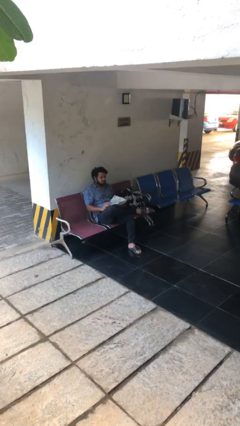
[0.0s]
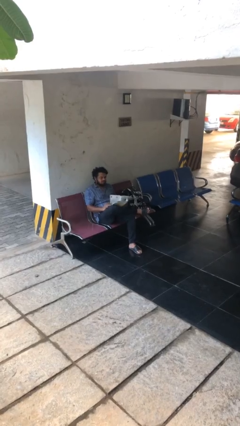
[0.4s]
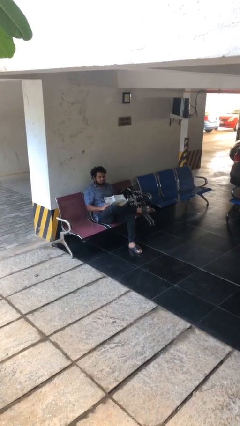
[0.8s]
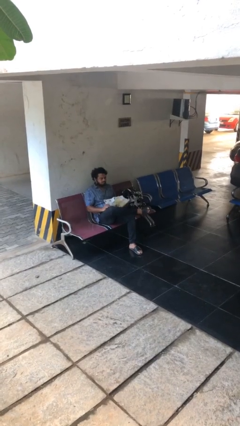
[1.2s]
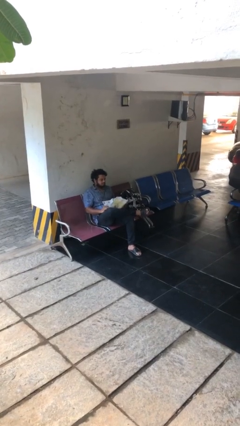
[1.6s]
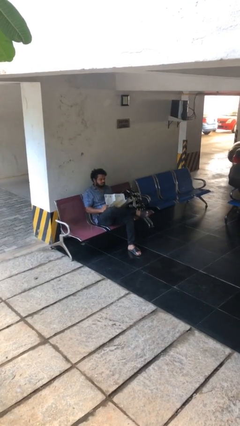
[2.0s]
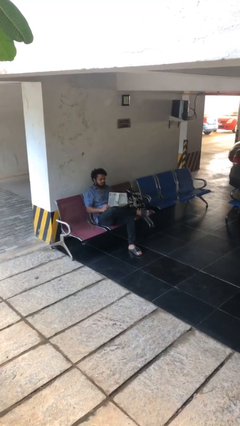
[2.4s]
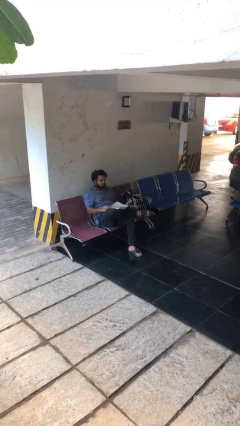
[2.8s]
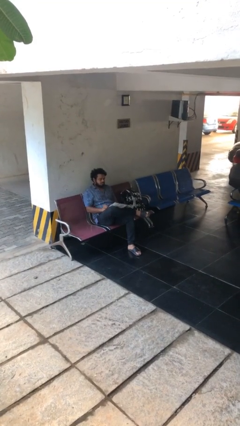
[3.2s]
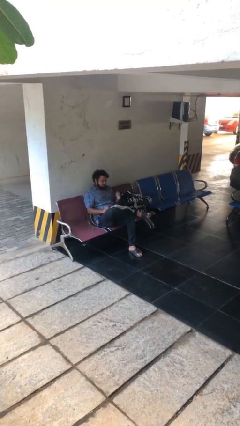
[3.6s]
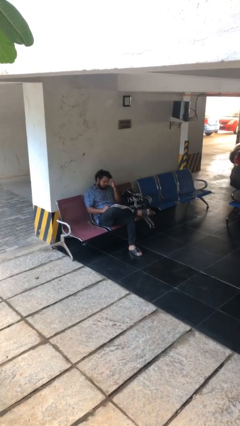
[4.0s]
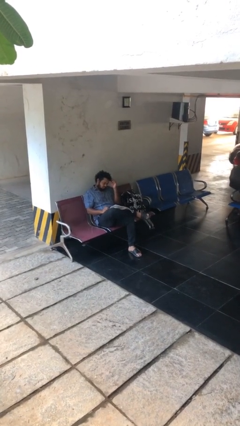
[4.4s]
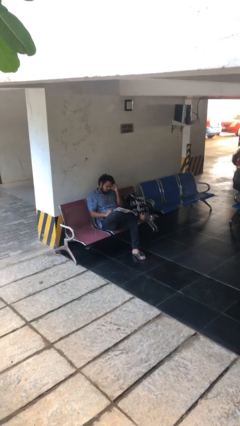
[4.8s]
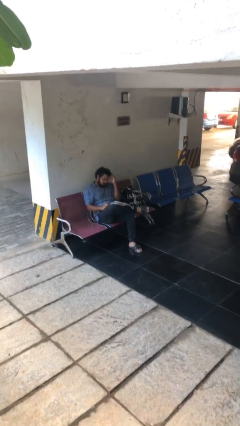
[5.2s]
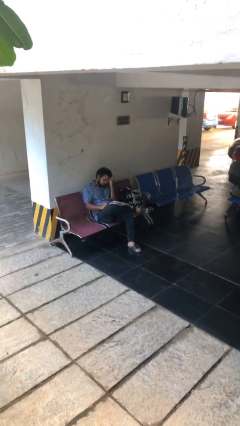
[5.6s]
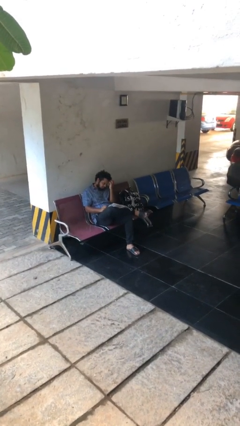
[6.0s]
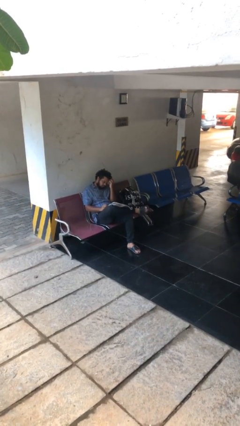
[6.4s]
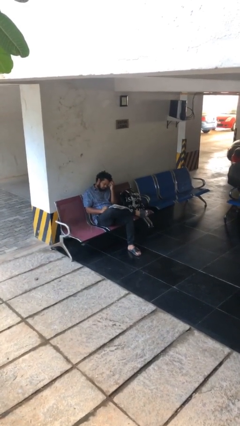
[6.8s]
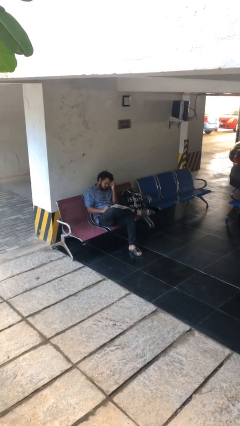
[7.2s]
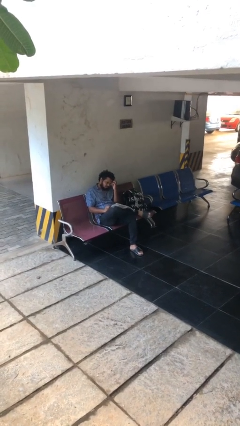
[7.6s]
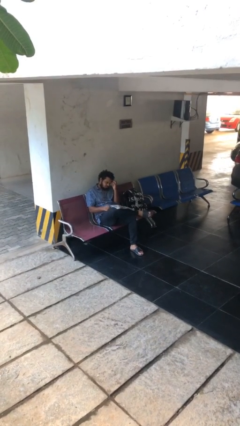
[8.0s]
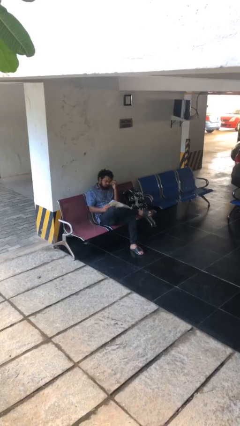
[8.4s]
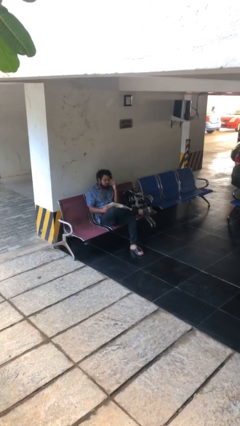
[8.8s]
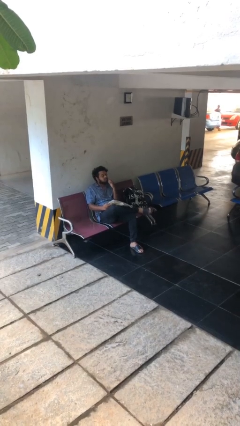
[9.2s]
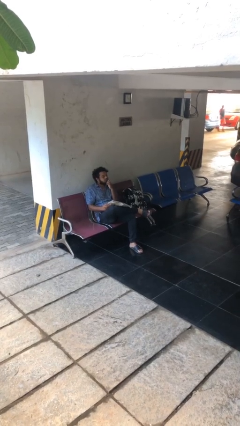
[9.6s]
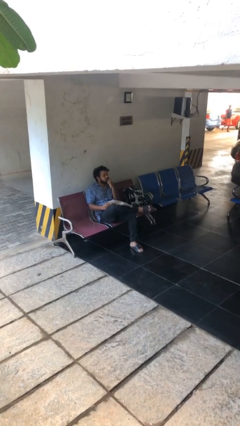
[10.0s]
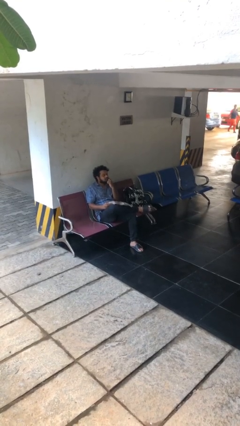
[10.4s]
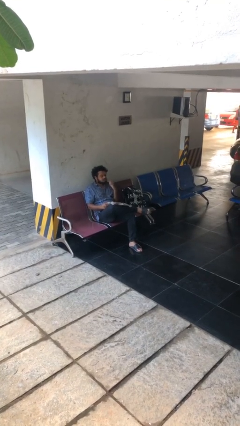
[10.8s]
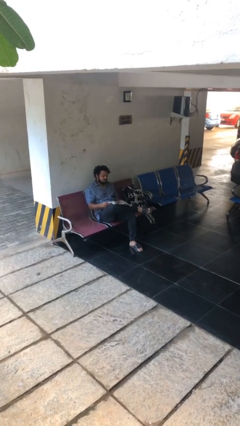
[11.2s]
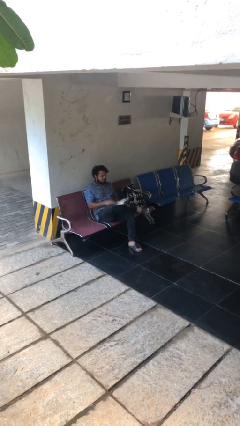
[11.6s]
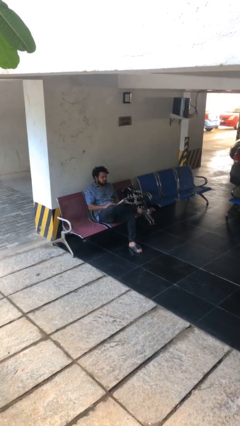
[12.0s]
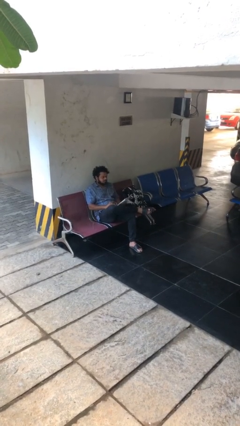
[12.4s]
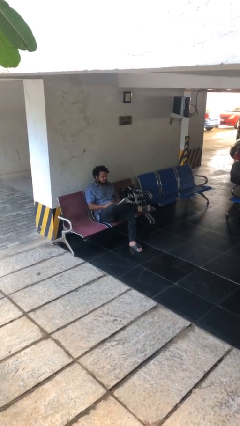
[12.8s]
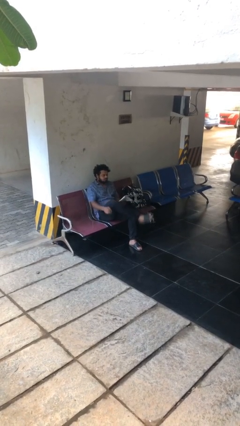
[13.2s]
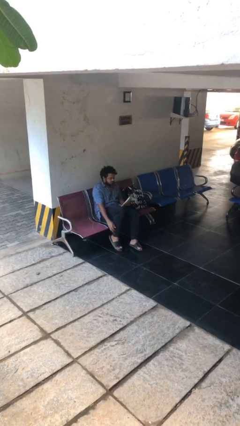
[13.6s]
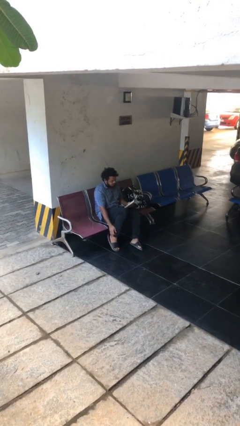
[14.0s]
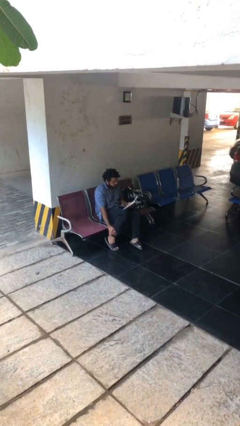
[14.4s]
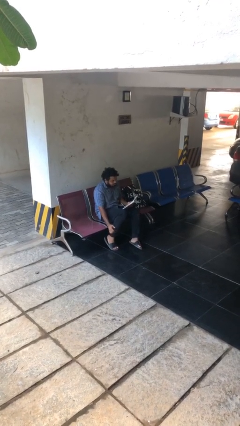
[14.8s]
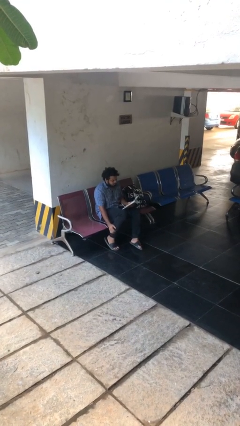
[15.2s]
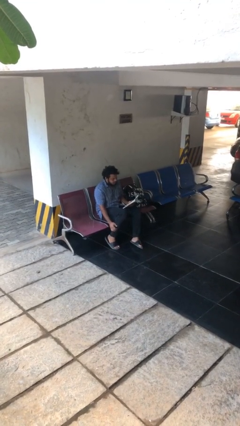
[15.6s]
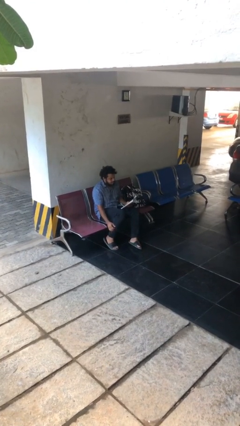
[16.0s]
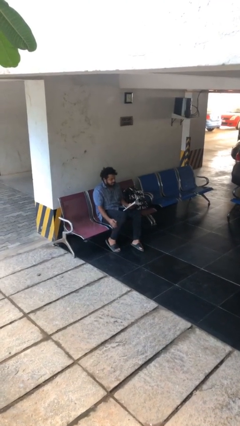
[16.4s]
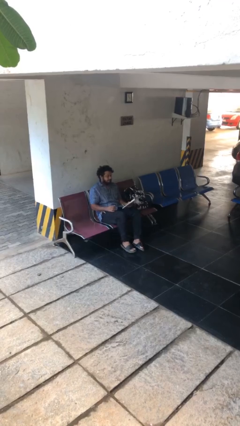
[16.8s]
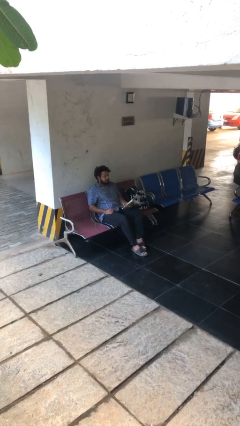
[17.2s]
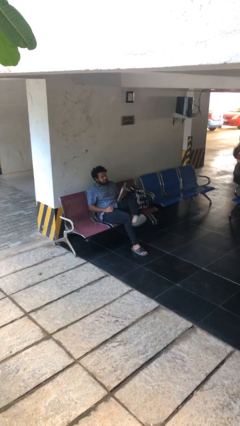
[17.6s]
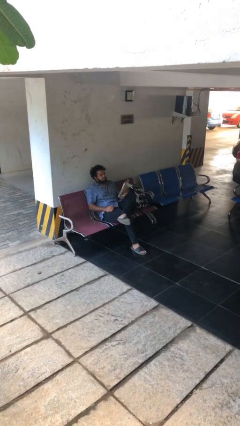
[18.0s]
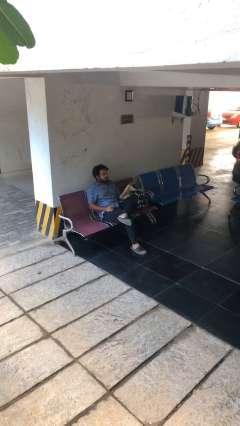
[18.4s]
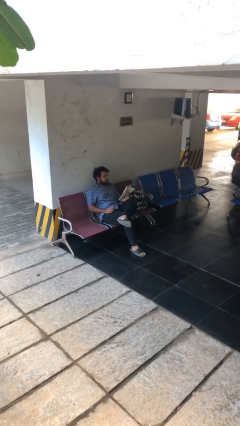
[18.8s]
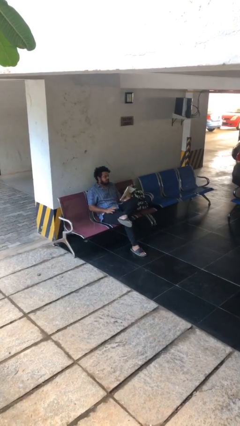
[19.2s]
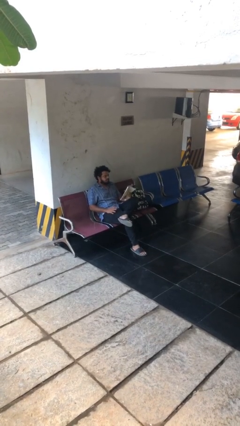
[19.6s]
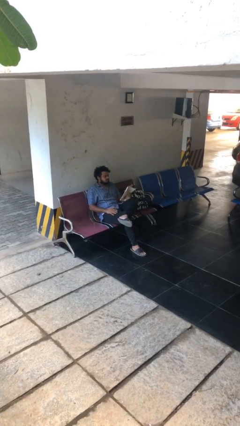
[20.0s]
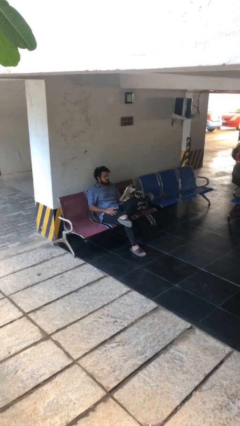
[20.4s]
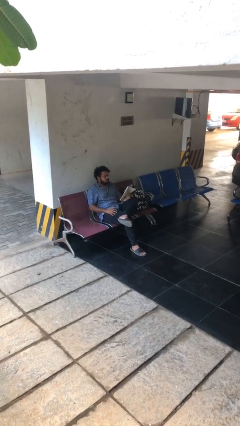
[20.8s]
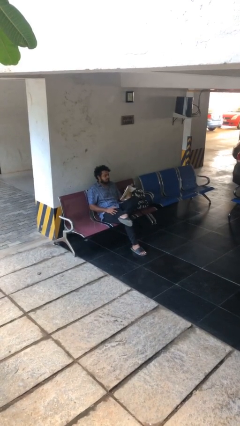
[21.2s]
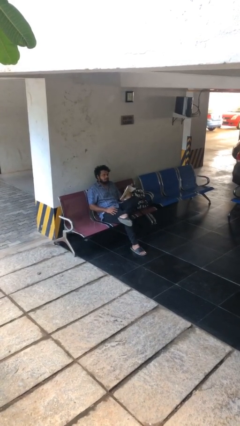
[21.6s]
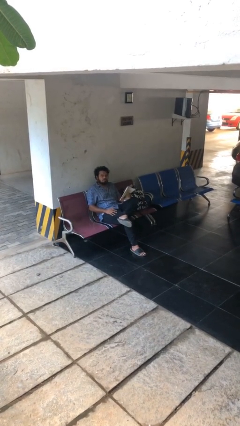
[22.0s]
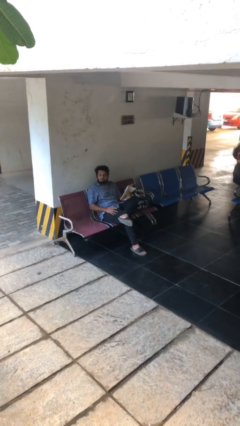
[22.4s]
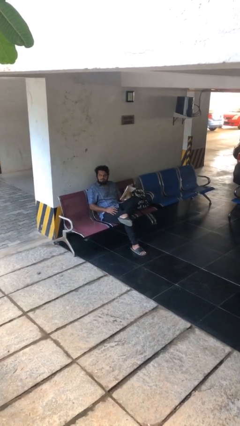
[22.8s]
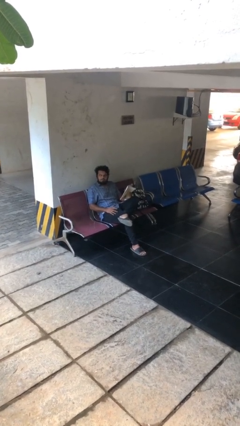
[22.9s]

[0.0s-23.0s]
person reads document

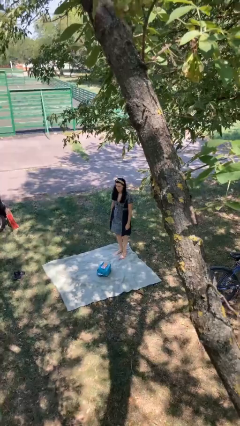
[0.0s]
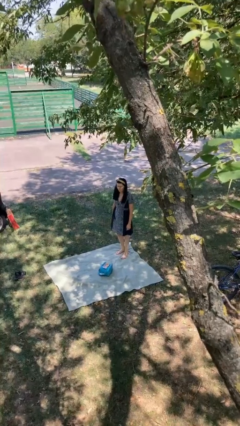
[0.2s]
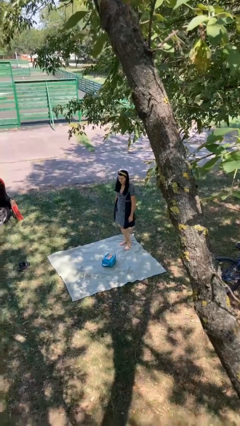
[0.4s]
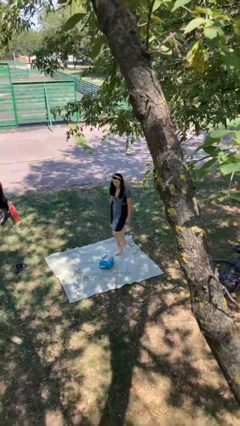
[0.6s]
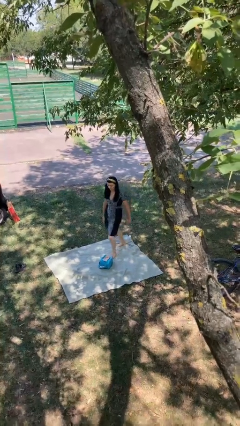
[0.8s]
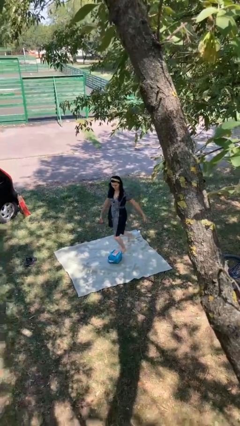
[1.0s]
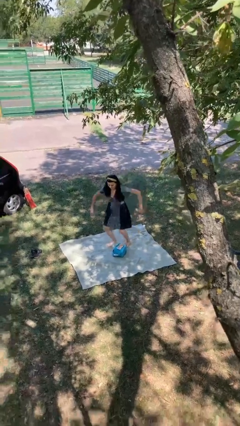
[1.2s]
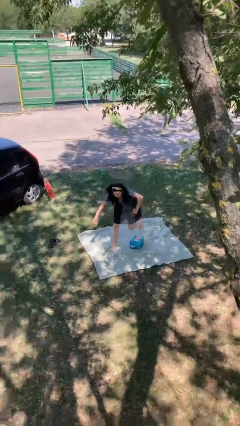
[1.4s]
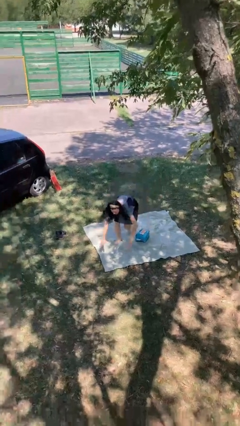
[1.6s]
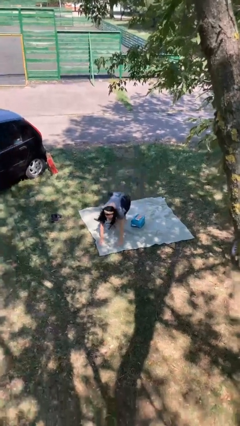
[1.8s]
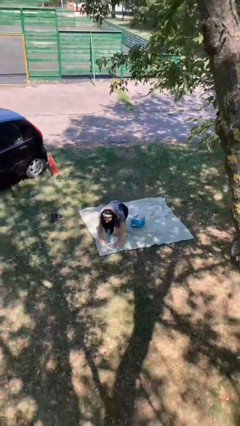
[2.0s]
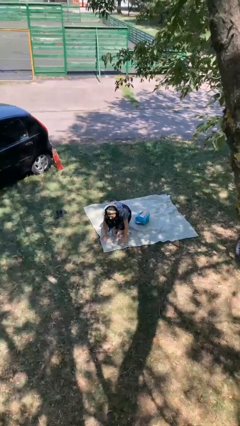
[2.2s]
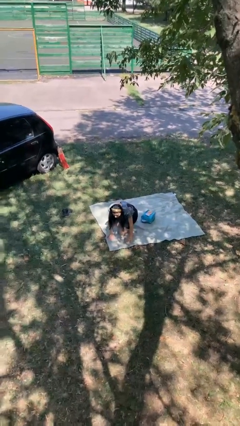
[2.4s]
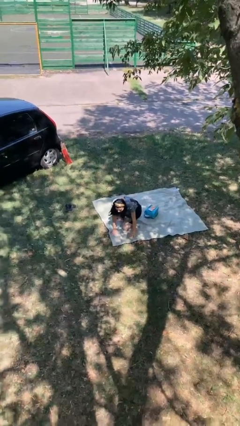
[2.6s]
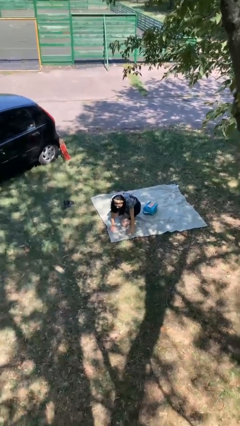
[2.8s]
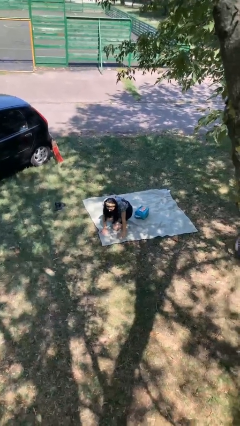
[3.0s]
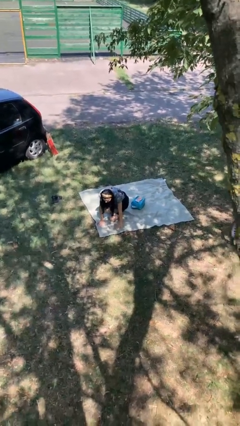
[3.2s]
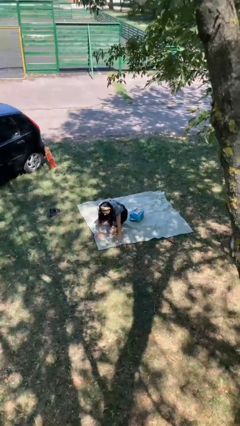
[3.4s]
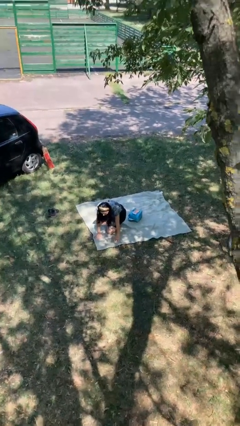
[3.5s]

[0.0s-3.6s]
person trips on object on floor

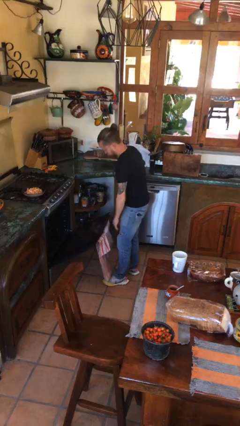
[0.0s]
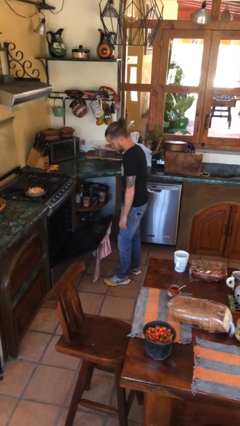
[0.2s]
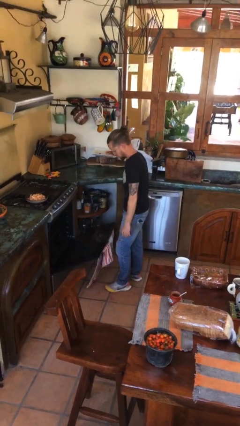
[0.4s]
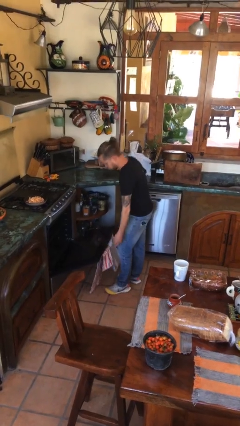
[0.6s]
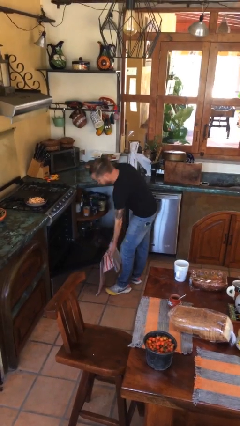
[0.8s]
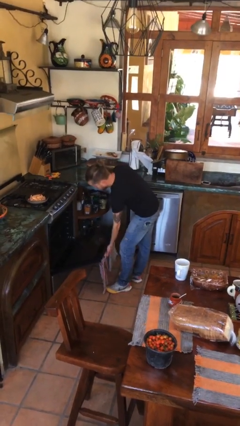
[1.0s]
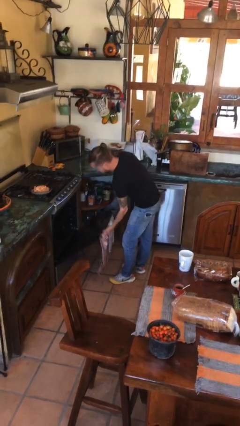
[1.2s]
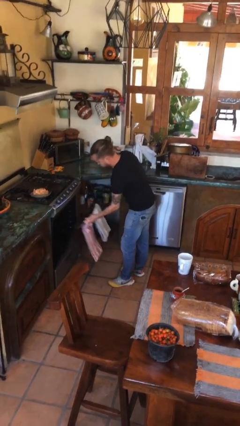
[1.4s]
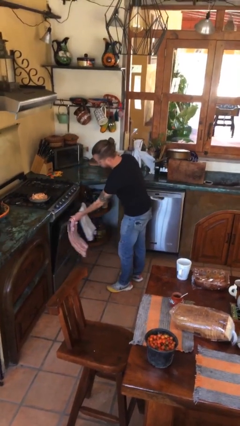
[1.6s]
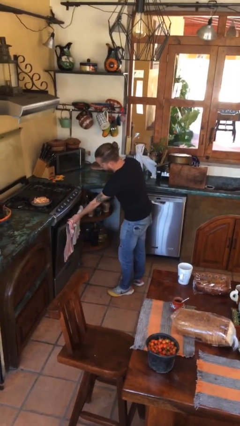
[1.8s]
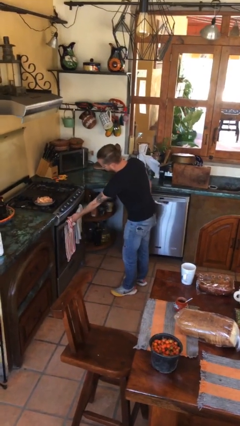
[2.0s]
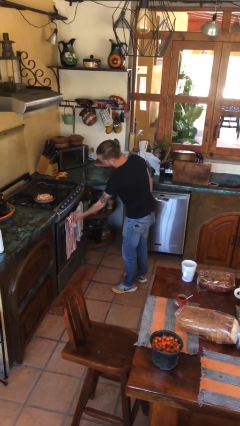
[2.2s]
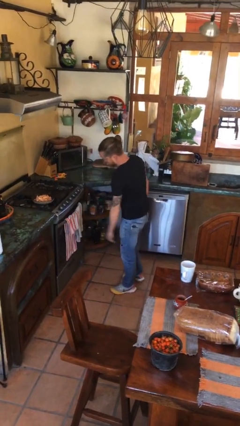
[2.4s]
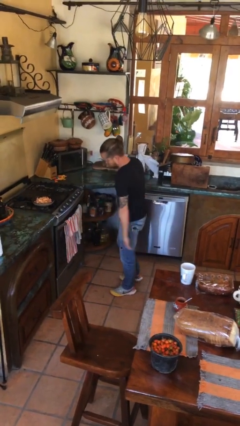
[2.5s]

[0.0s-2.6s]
person closes oven door

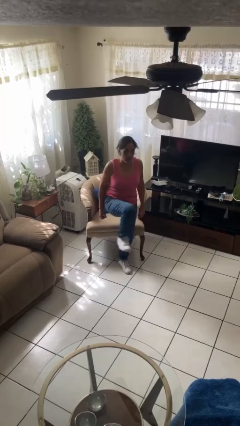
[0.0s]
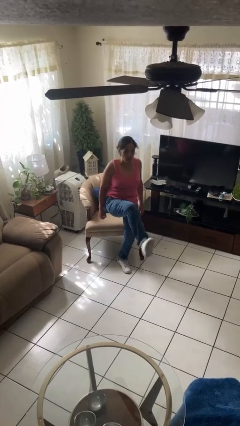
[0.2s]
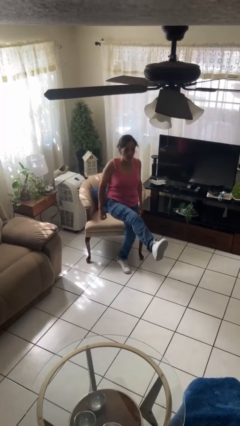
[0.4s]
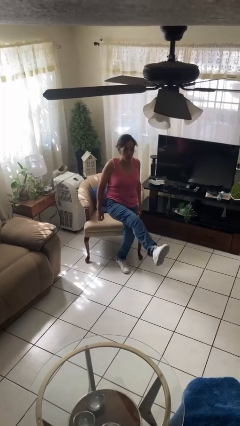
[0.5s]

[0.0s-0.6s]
person karate kicks
